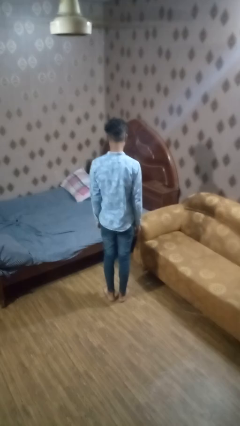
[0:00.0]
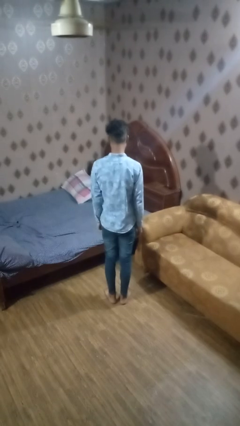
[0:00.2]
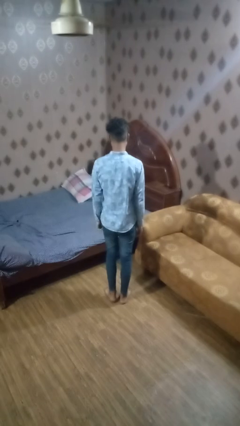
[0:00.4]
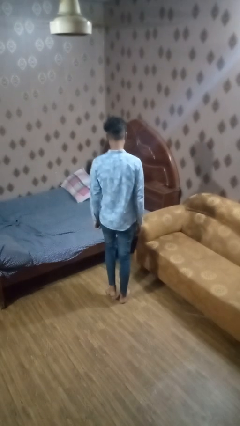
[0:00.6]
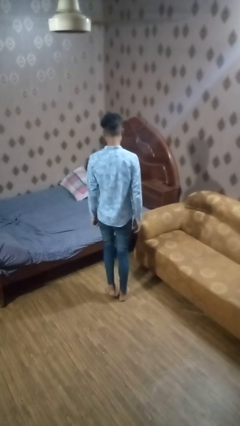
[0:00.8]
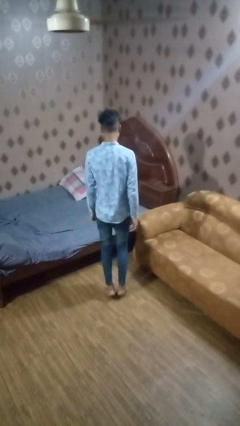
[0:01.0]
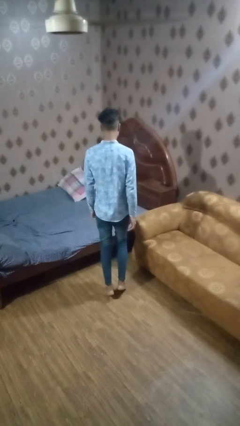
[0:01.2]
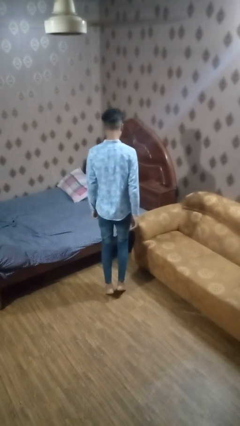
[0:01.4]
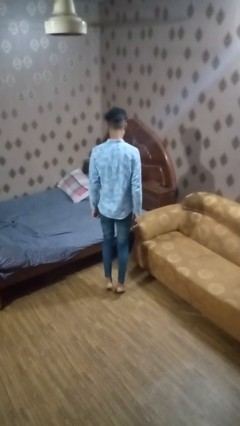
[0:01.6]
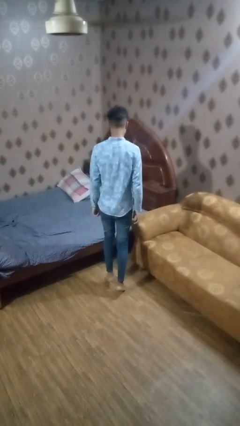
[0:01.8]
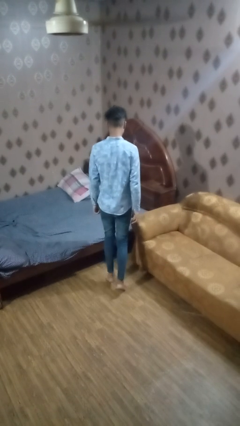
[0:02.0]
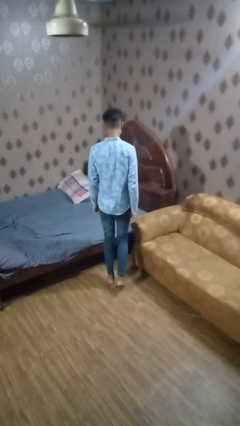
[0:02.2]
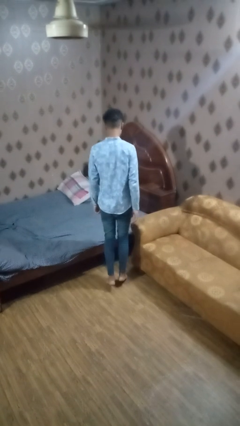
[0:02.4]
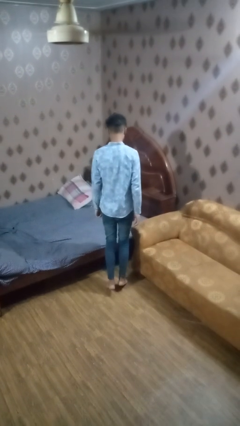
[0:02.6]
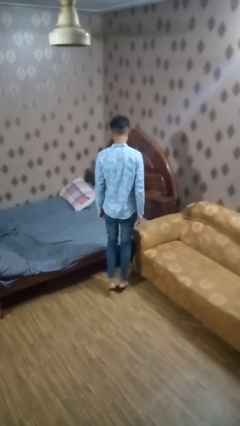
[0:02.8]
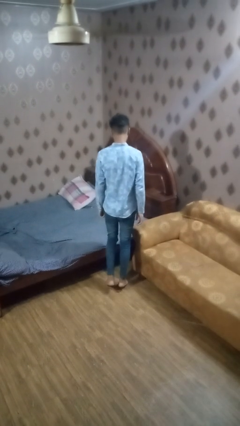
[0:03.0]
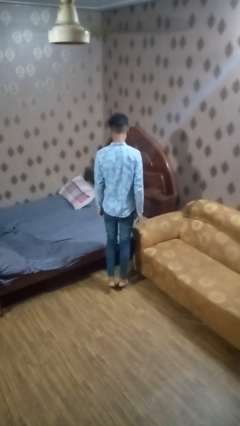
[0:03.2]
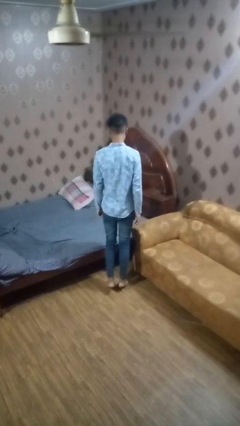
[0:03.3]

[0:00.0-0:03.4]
person walks tiptoe

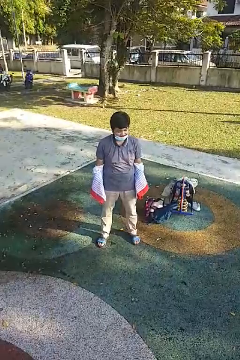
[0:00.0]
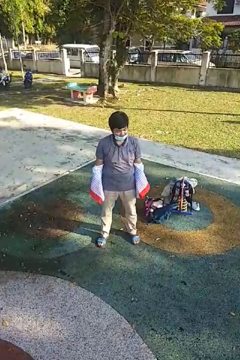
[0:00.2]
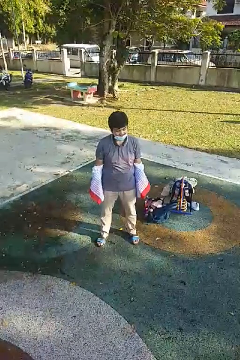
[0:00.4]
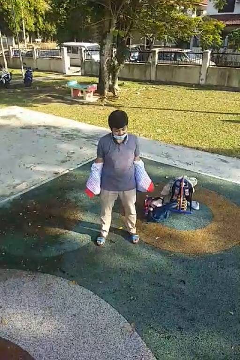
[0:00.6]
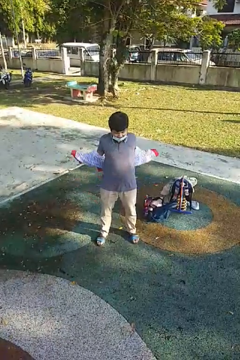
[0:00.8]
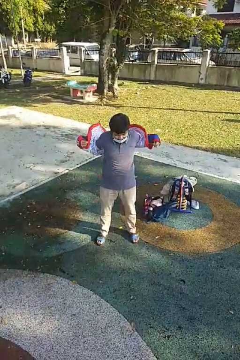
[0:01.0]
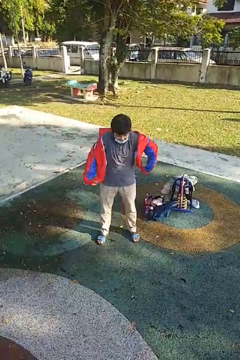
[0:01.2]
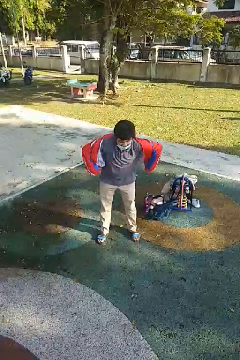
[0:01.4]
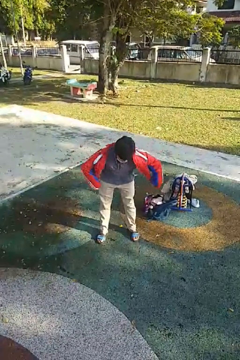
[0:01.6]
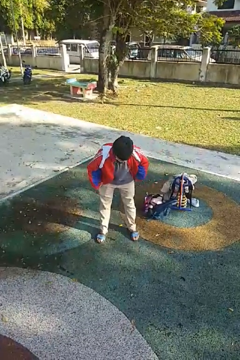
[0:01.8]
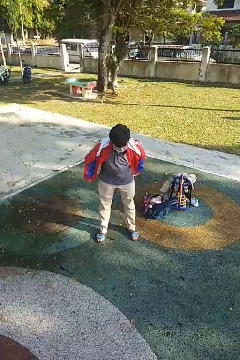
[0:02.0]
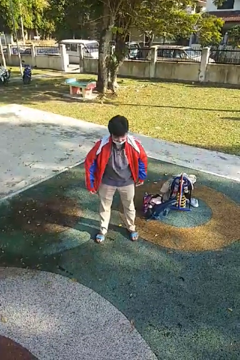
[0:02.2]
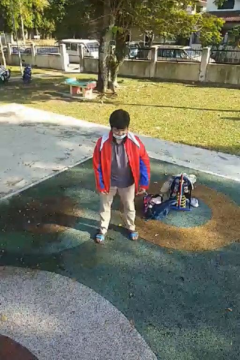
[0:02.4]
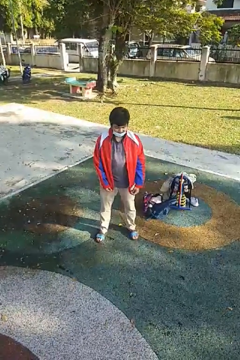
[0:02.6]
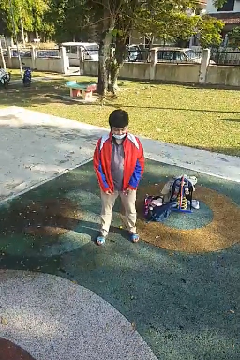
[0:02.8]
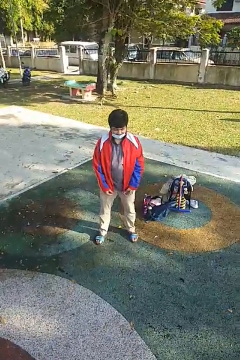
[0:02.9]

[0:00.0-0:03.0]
person puts on jacket

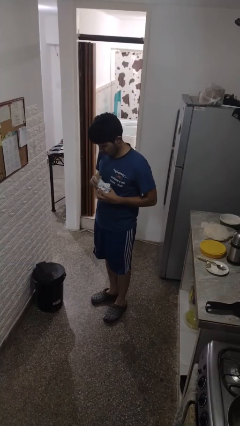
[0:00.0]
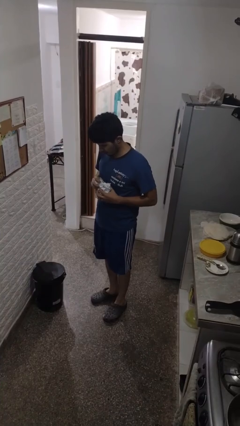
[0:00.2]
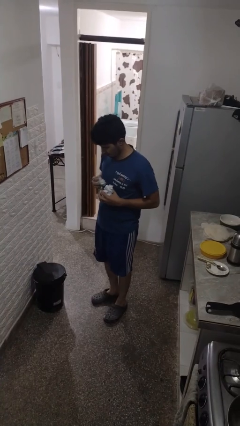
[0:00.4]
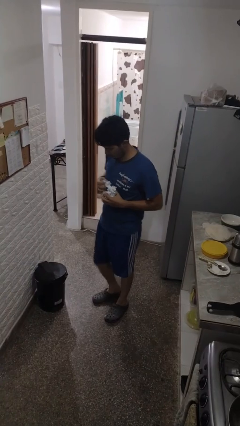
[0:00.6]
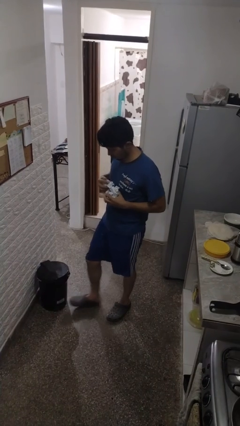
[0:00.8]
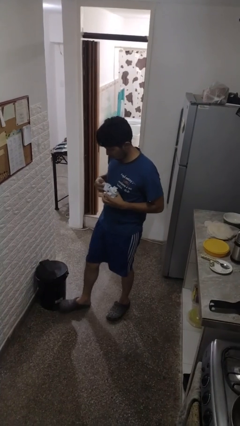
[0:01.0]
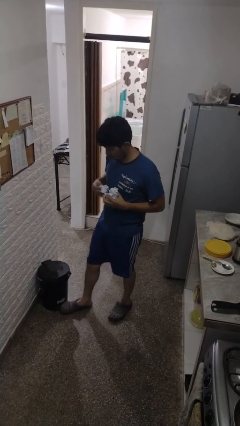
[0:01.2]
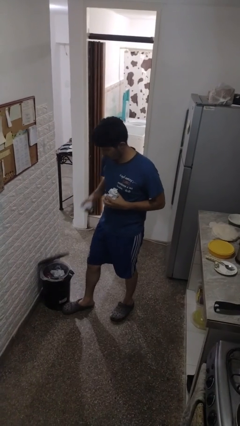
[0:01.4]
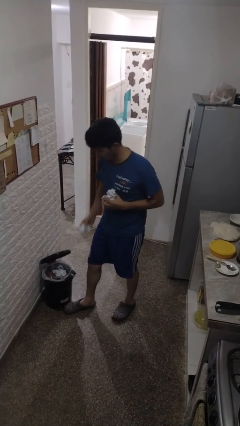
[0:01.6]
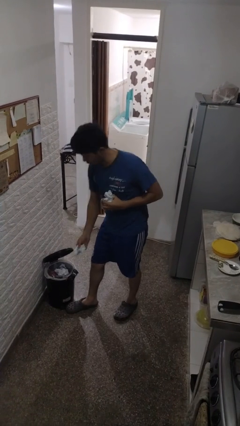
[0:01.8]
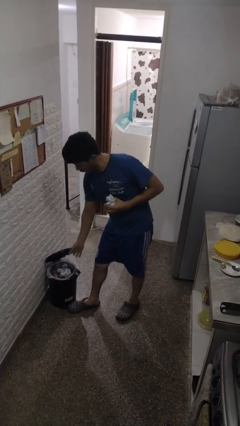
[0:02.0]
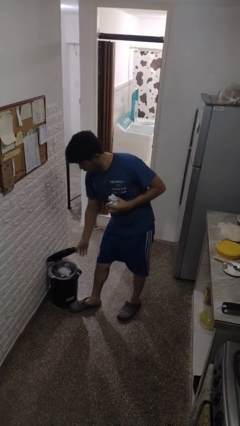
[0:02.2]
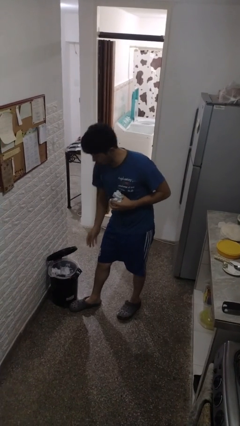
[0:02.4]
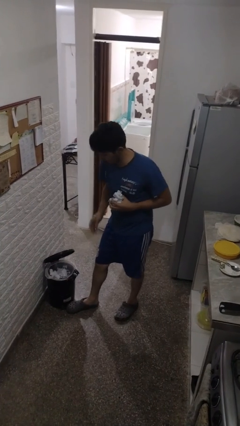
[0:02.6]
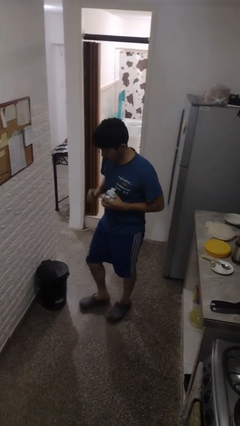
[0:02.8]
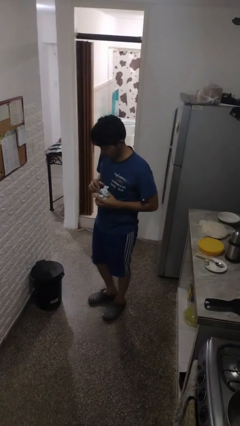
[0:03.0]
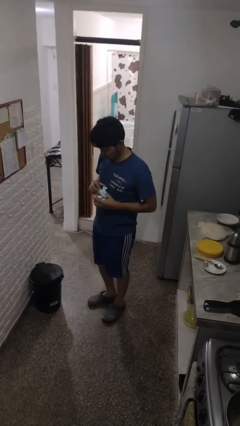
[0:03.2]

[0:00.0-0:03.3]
person discards trash

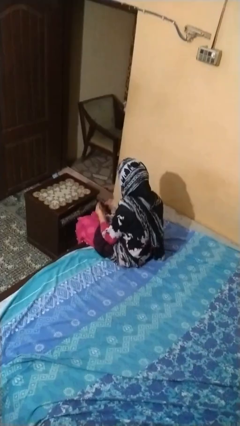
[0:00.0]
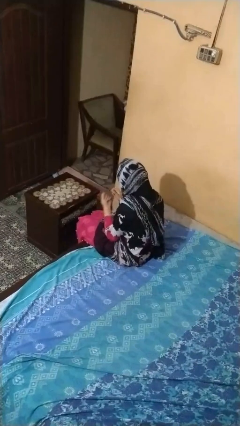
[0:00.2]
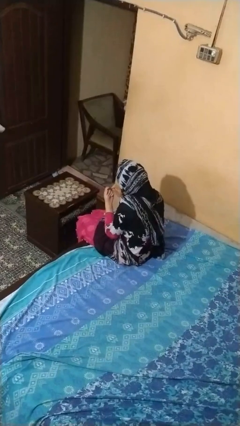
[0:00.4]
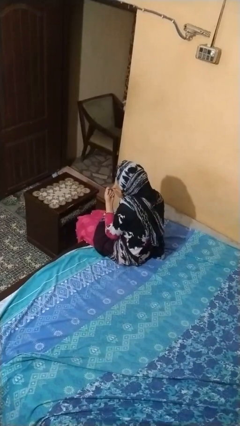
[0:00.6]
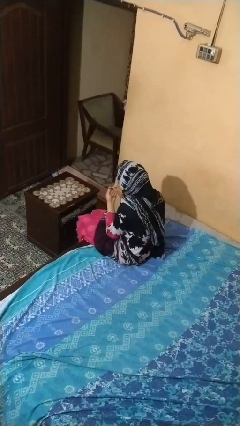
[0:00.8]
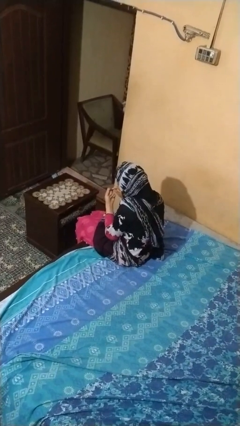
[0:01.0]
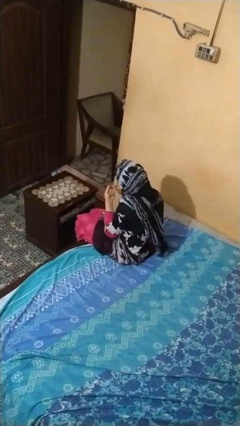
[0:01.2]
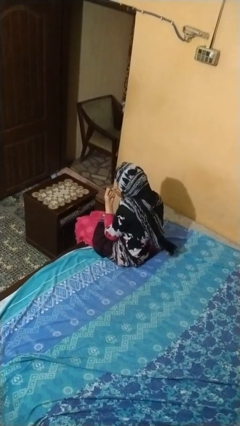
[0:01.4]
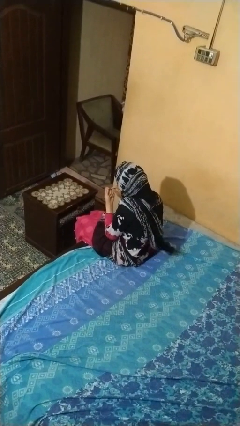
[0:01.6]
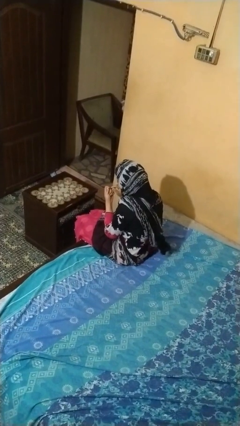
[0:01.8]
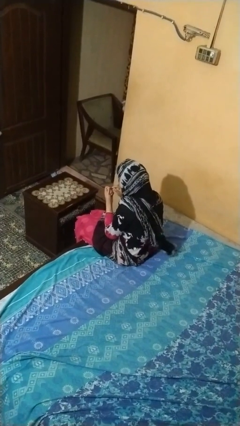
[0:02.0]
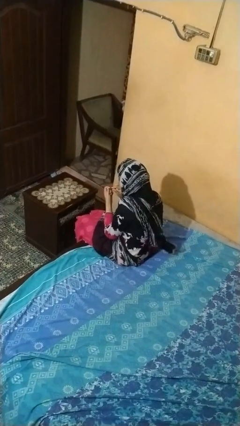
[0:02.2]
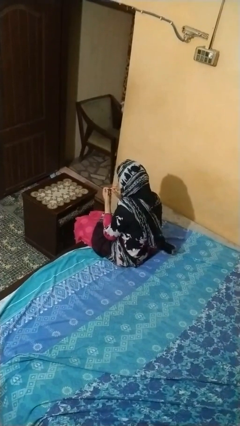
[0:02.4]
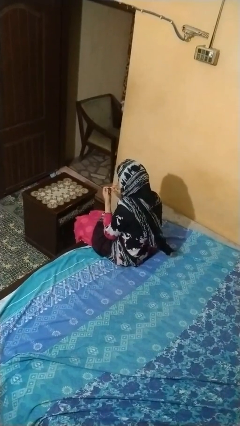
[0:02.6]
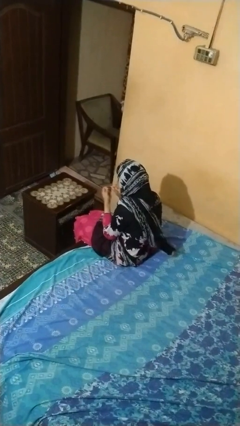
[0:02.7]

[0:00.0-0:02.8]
person files fingernails

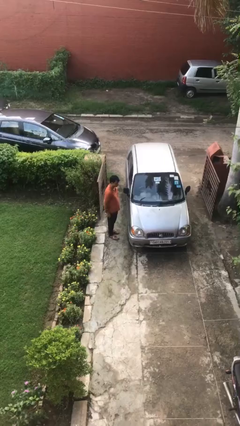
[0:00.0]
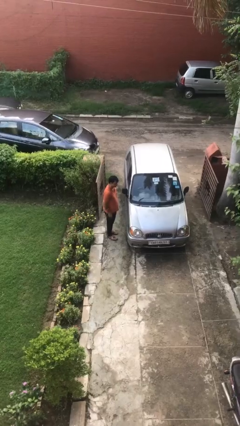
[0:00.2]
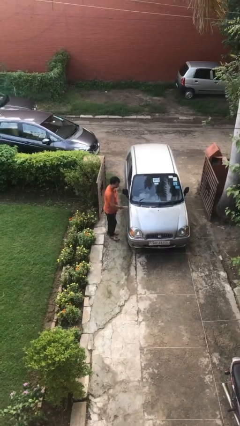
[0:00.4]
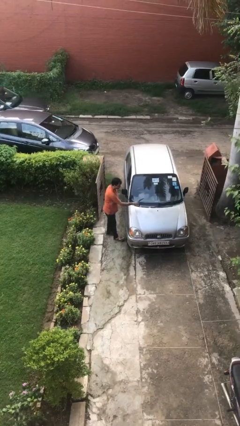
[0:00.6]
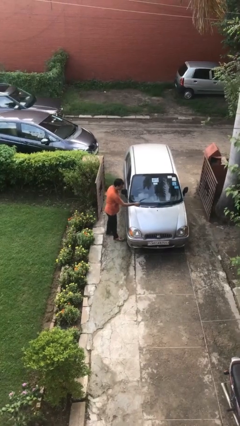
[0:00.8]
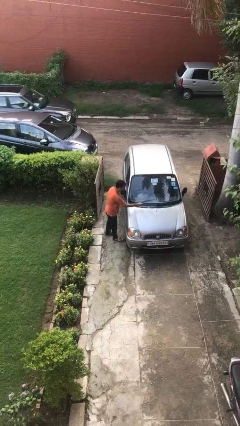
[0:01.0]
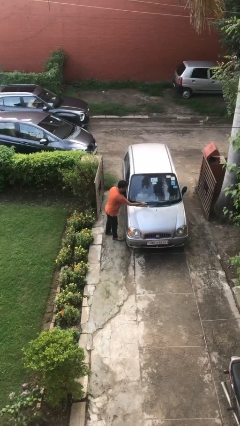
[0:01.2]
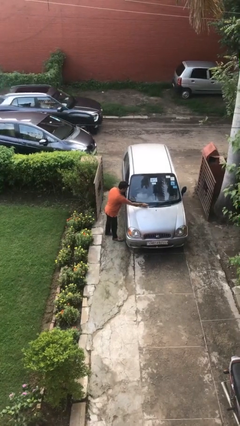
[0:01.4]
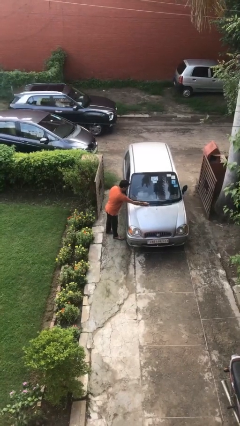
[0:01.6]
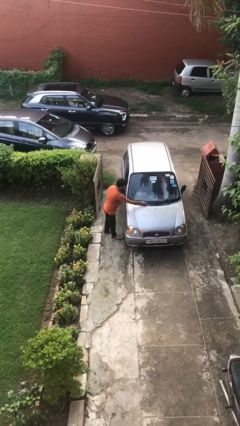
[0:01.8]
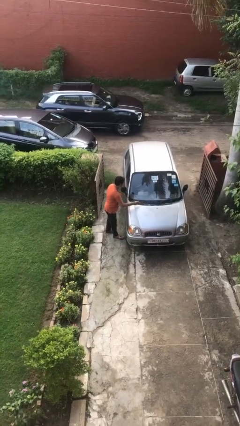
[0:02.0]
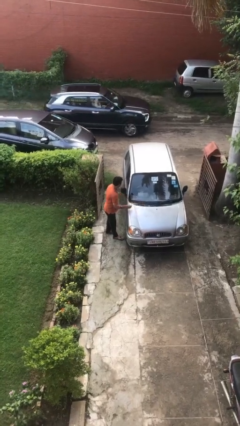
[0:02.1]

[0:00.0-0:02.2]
person flips down car wipers

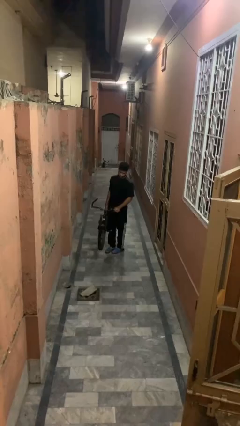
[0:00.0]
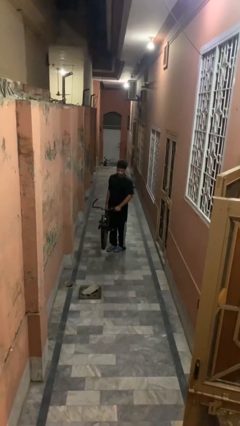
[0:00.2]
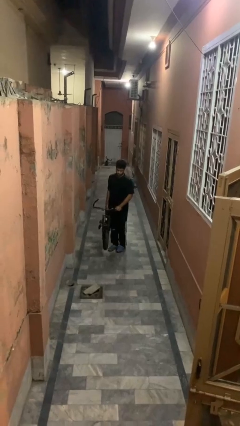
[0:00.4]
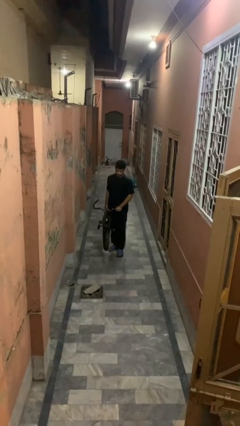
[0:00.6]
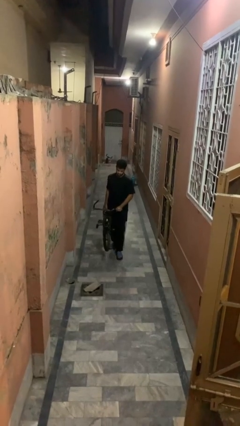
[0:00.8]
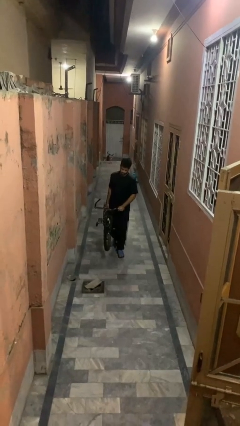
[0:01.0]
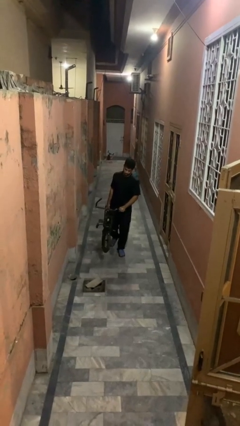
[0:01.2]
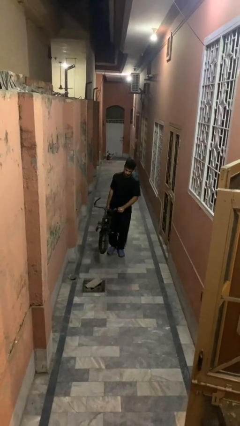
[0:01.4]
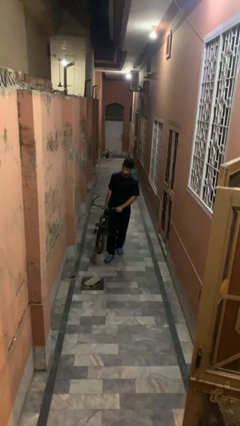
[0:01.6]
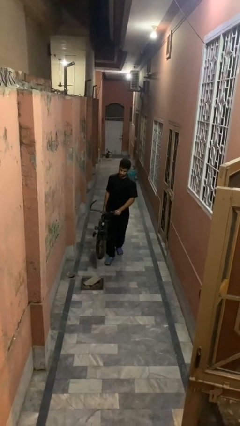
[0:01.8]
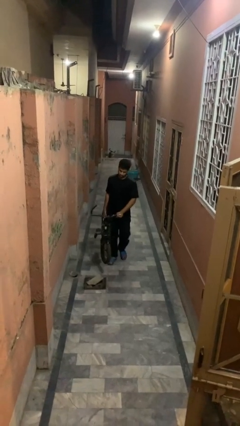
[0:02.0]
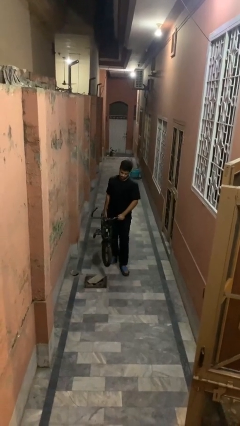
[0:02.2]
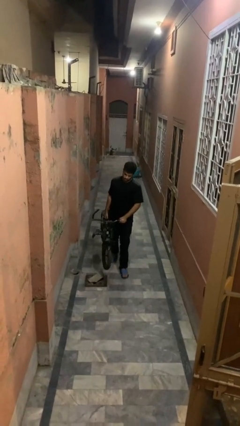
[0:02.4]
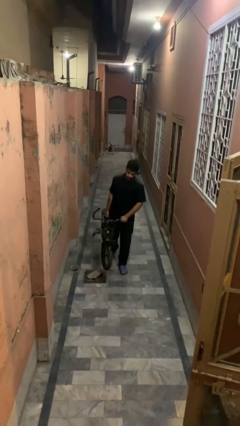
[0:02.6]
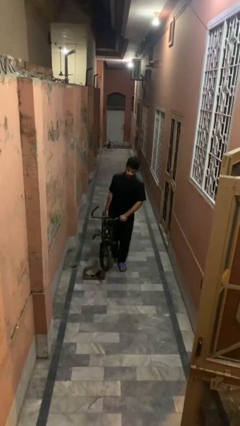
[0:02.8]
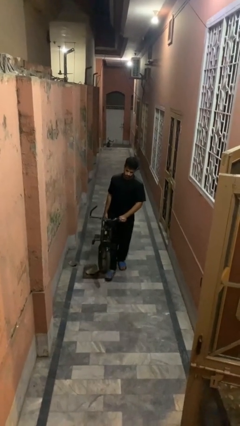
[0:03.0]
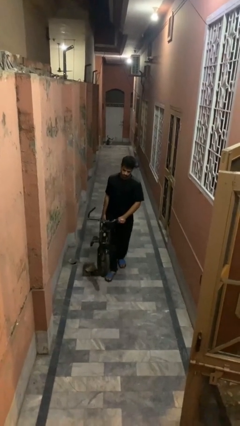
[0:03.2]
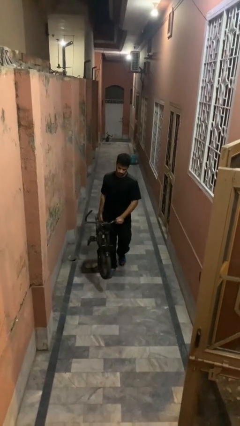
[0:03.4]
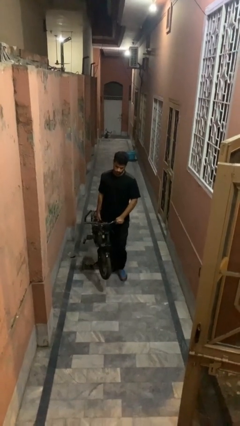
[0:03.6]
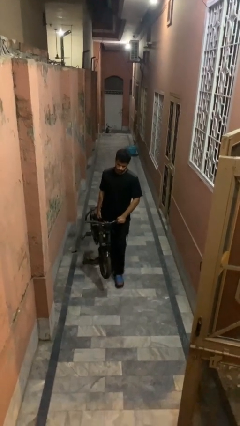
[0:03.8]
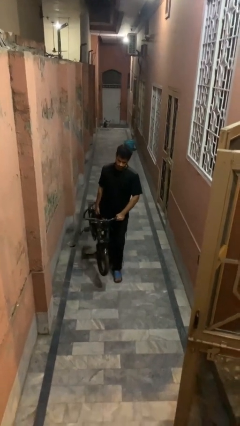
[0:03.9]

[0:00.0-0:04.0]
person carries bicycle
